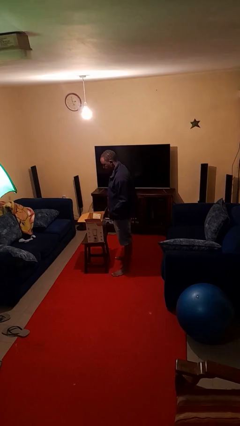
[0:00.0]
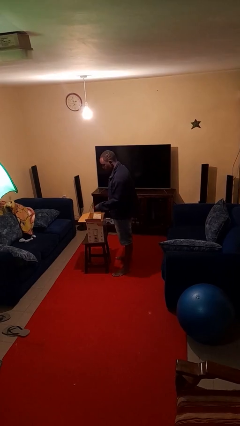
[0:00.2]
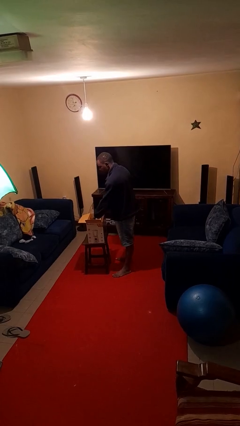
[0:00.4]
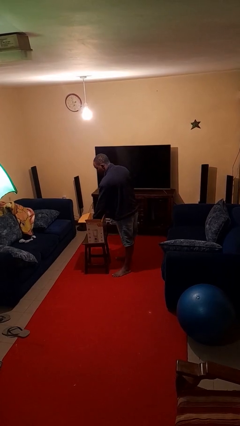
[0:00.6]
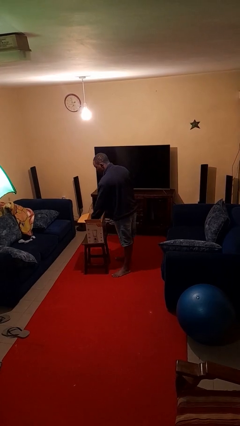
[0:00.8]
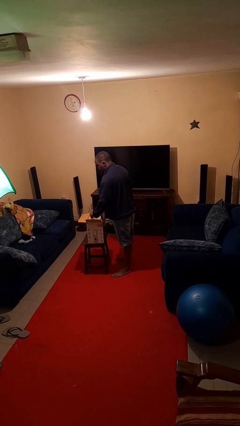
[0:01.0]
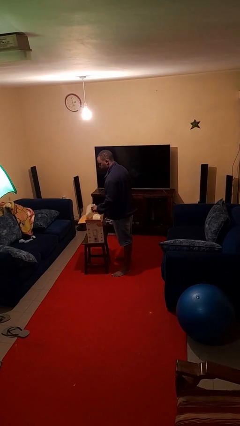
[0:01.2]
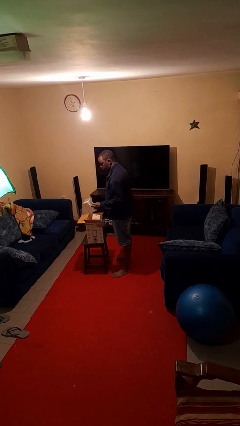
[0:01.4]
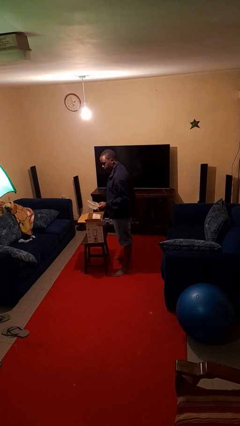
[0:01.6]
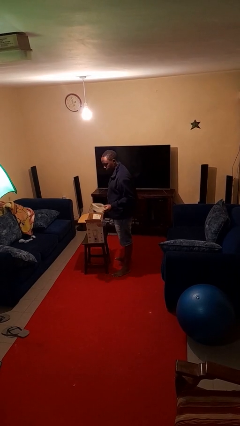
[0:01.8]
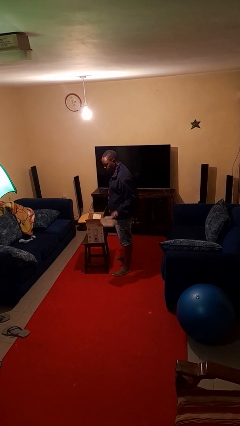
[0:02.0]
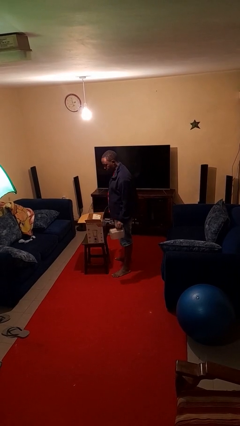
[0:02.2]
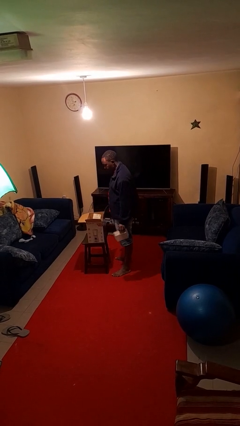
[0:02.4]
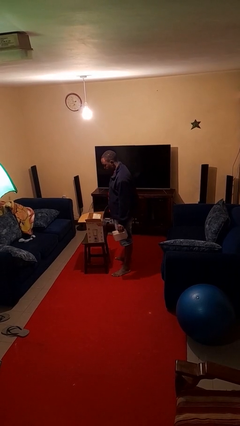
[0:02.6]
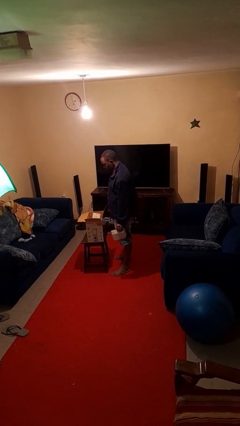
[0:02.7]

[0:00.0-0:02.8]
person takes object from box

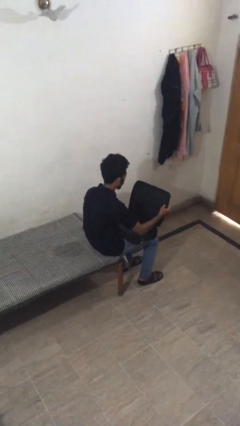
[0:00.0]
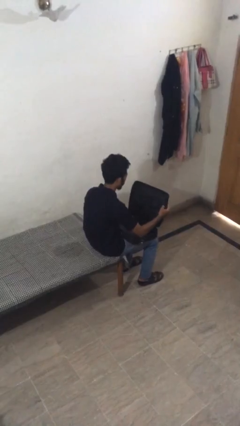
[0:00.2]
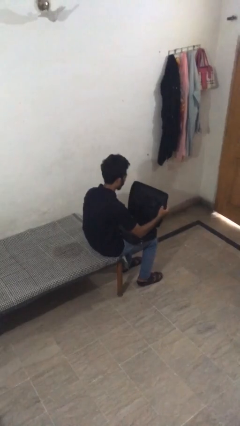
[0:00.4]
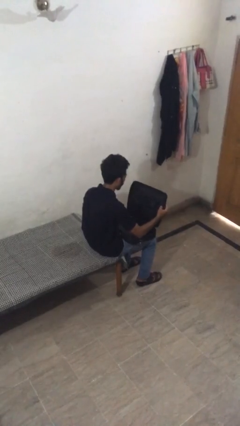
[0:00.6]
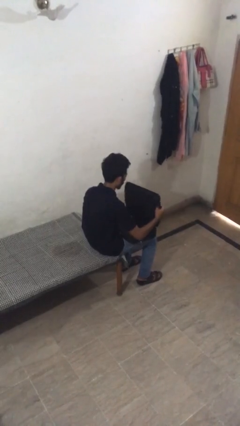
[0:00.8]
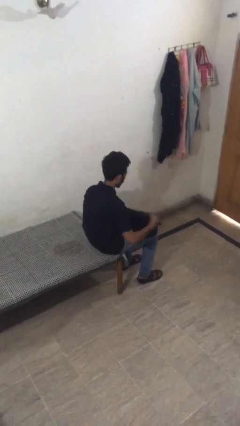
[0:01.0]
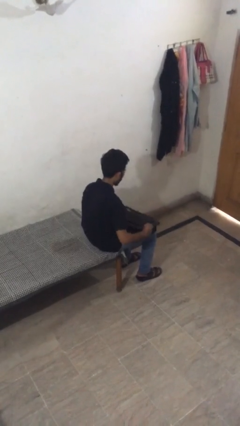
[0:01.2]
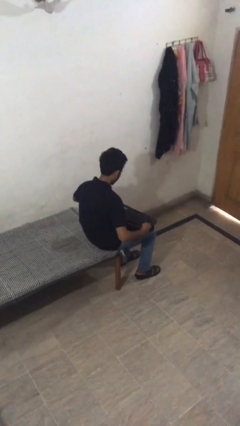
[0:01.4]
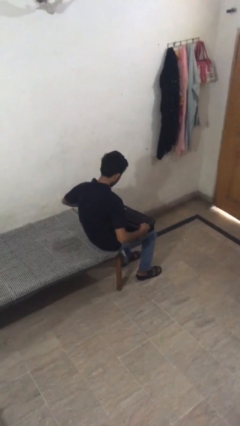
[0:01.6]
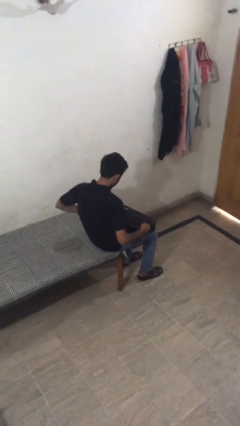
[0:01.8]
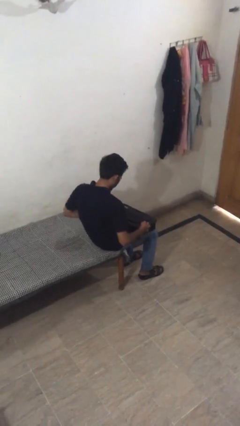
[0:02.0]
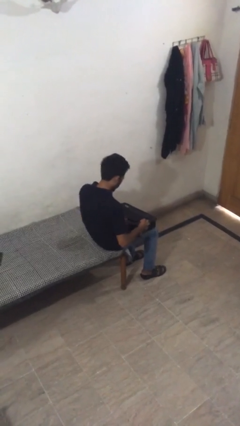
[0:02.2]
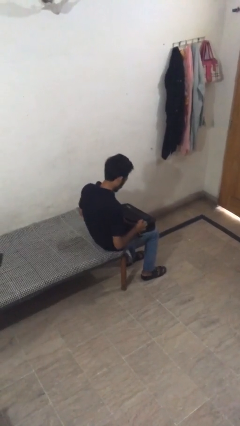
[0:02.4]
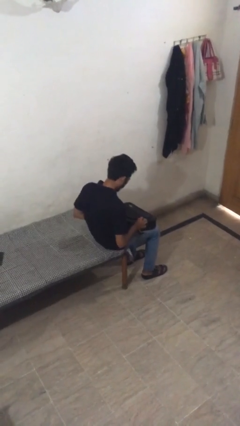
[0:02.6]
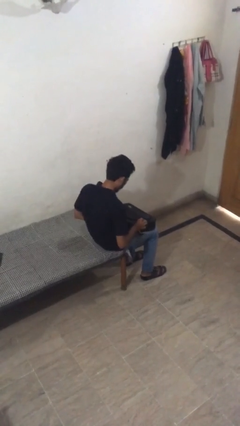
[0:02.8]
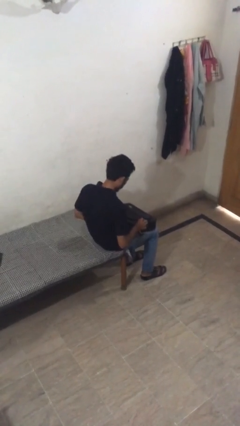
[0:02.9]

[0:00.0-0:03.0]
person closes suitcase

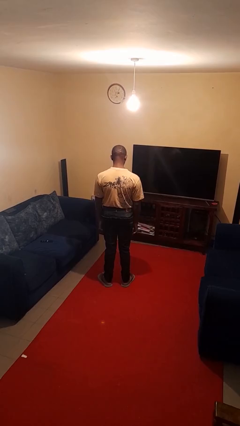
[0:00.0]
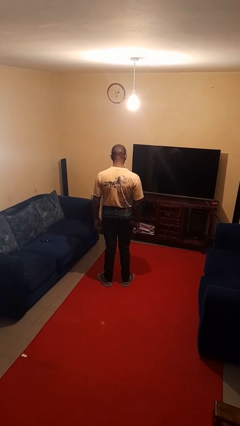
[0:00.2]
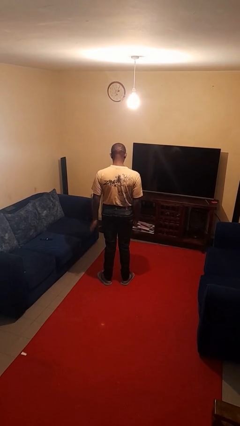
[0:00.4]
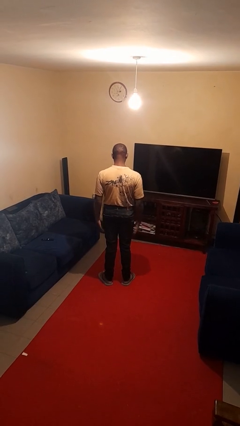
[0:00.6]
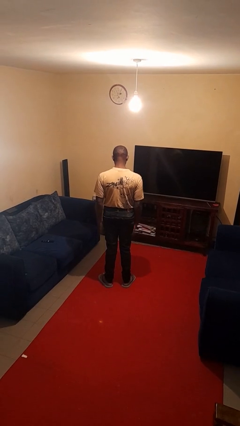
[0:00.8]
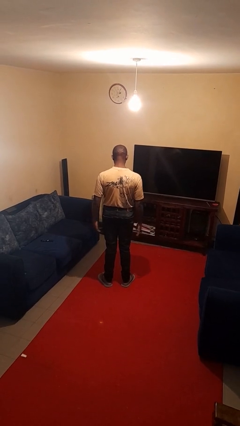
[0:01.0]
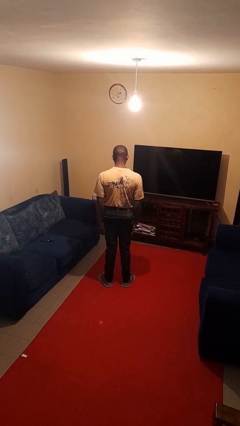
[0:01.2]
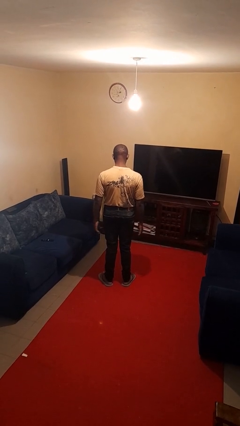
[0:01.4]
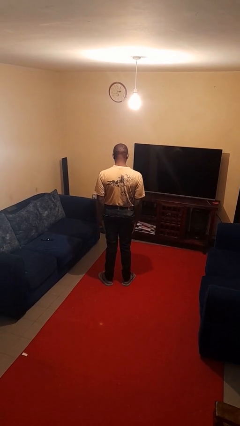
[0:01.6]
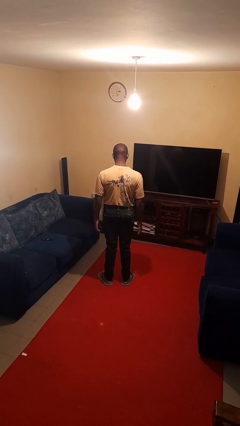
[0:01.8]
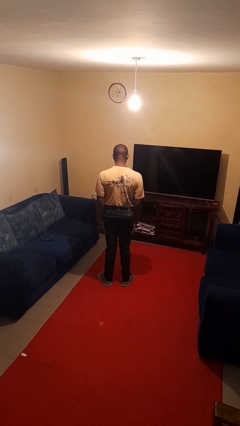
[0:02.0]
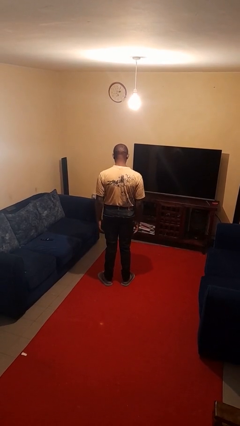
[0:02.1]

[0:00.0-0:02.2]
person slaps hands on thighs

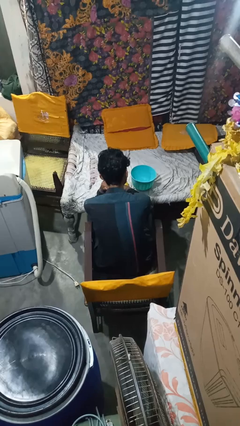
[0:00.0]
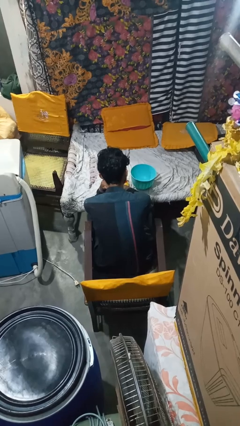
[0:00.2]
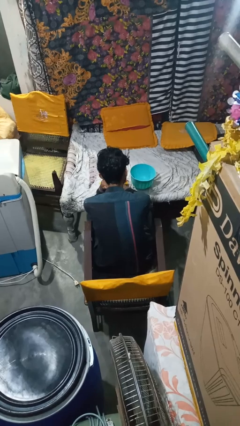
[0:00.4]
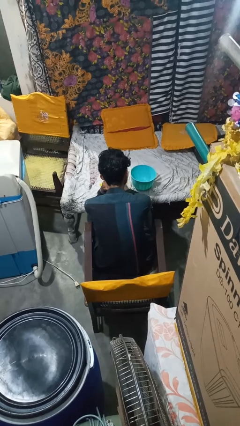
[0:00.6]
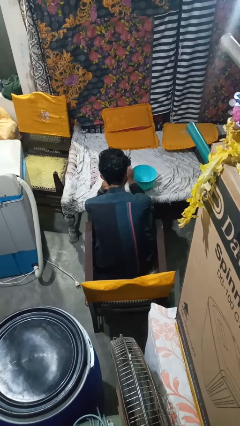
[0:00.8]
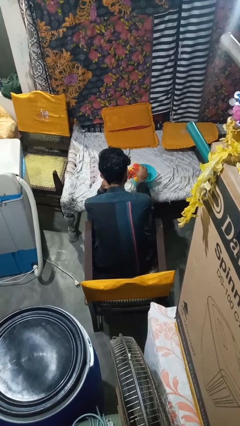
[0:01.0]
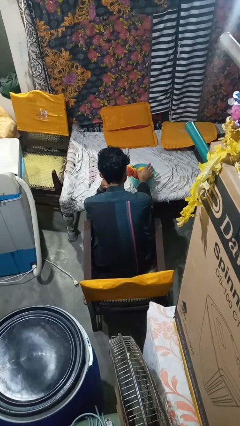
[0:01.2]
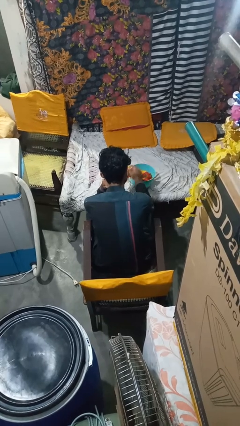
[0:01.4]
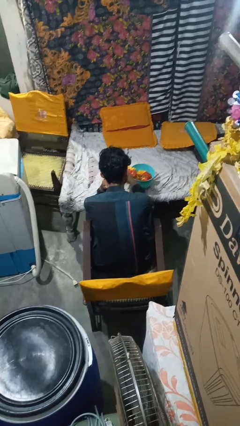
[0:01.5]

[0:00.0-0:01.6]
person pours into bowl

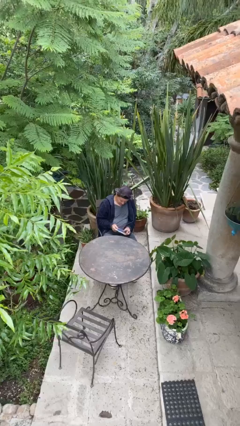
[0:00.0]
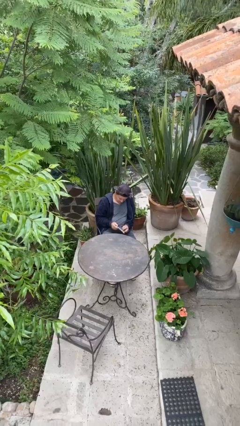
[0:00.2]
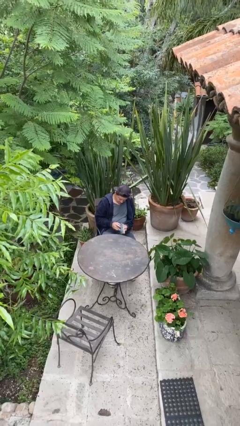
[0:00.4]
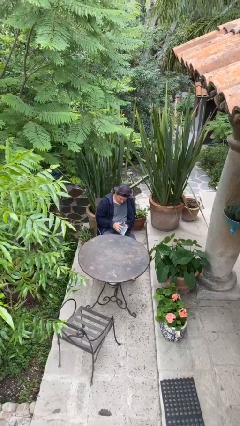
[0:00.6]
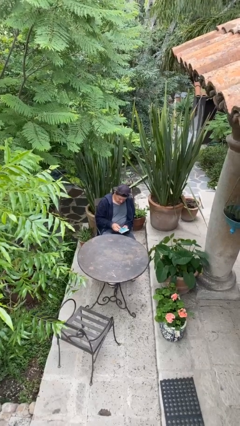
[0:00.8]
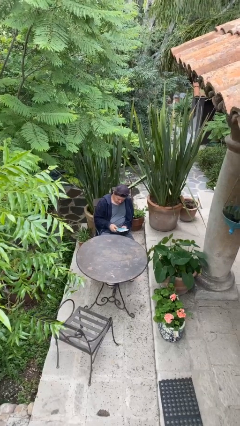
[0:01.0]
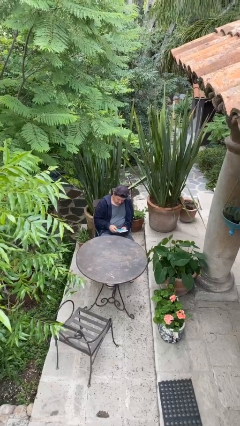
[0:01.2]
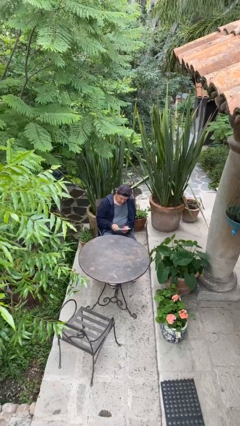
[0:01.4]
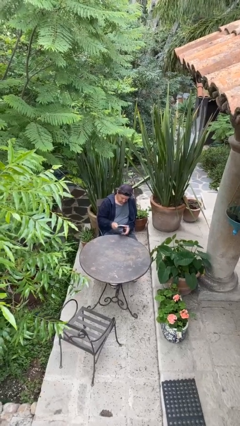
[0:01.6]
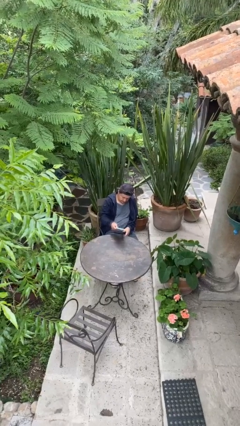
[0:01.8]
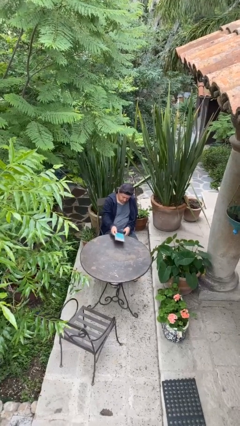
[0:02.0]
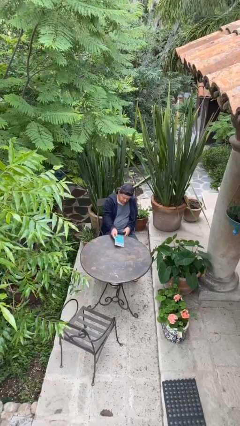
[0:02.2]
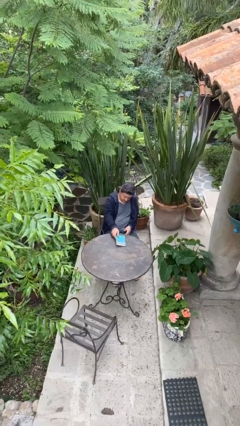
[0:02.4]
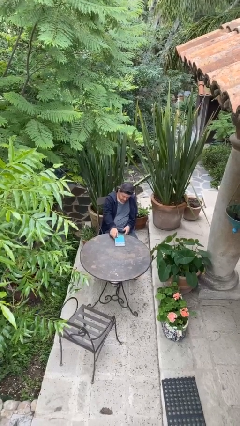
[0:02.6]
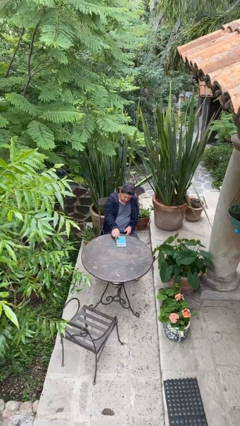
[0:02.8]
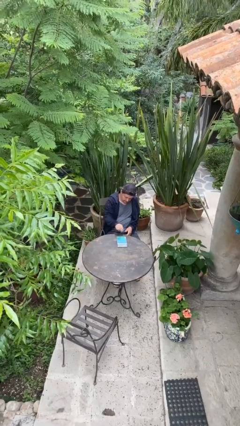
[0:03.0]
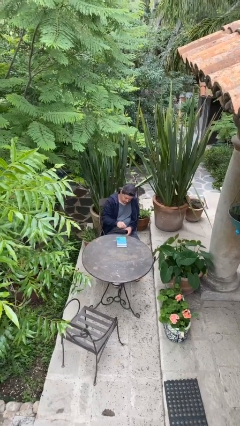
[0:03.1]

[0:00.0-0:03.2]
person puts down object on table

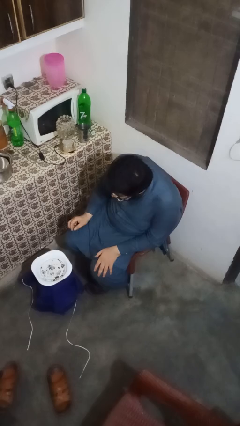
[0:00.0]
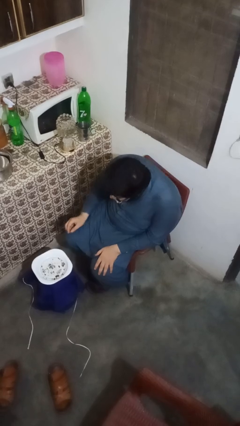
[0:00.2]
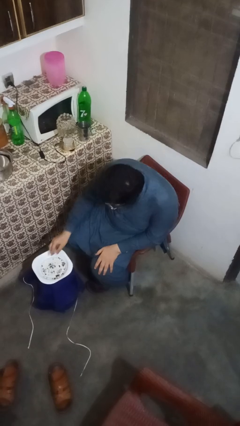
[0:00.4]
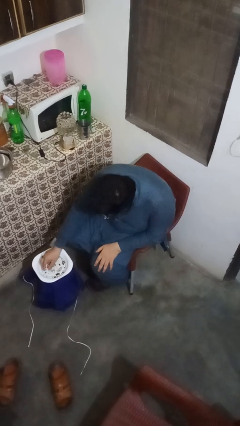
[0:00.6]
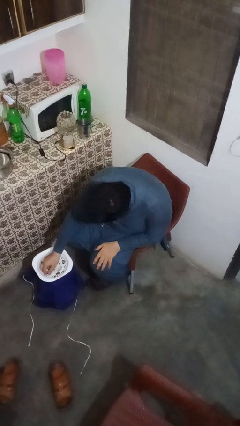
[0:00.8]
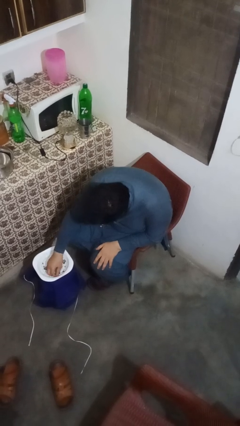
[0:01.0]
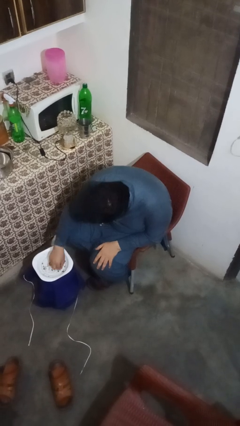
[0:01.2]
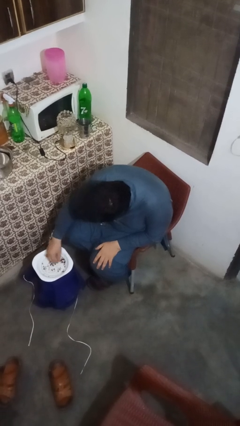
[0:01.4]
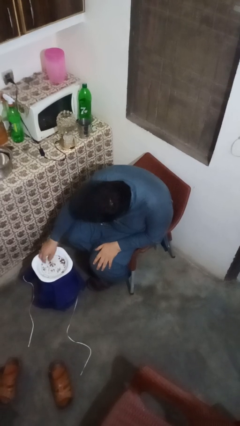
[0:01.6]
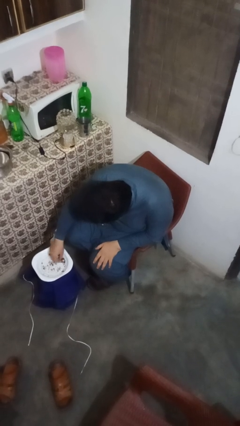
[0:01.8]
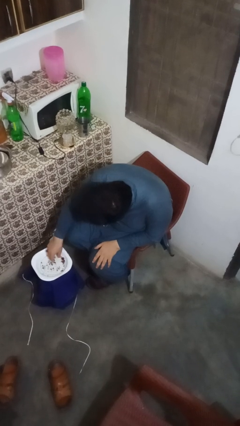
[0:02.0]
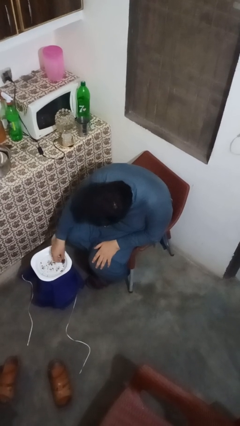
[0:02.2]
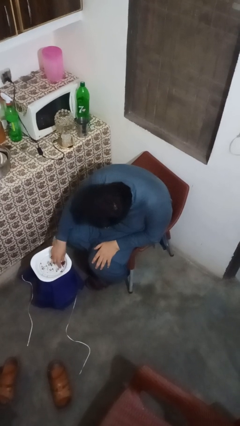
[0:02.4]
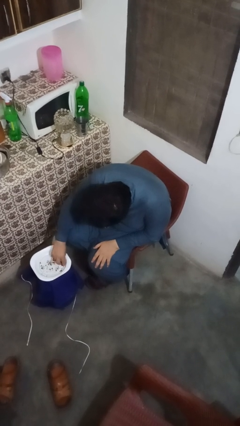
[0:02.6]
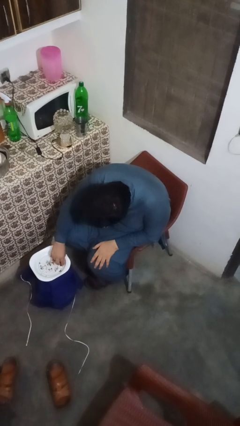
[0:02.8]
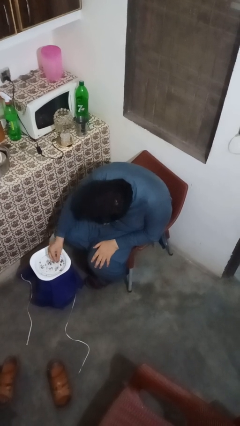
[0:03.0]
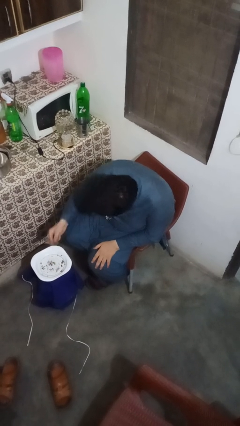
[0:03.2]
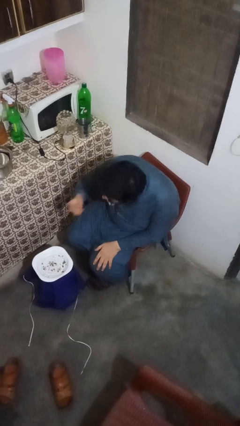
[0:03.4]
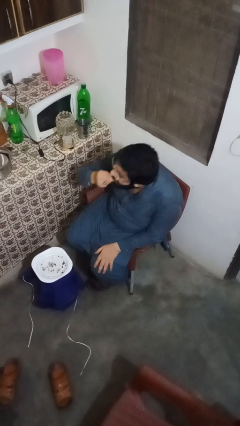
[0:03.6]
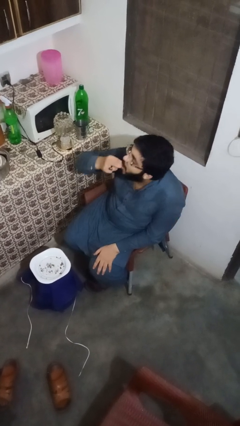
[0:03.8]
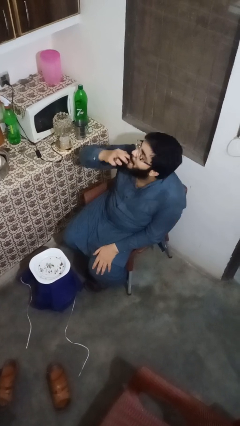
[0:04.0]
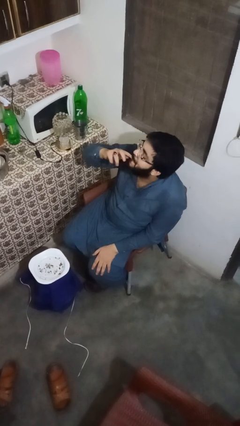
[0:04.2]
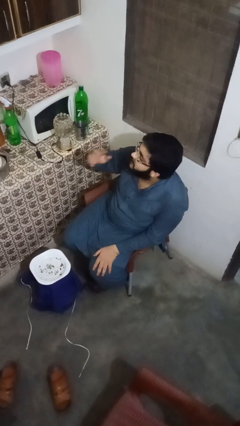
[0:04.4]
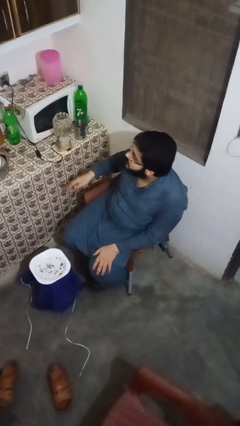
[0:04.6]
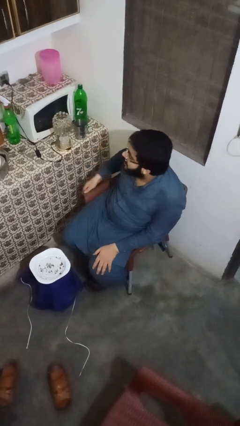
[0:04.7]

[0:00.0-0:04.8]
person eats with hands
